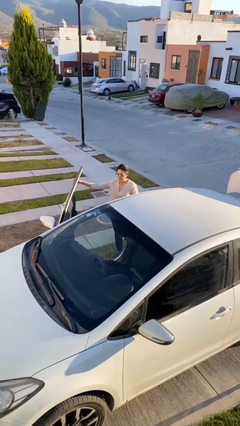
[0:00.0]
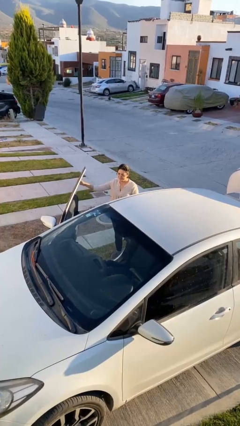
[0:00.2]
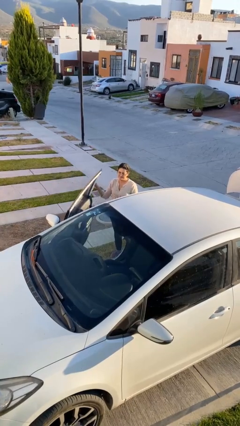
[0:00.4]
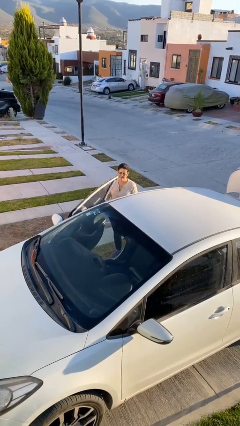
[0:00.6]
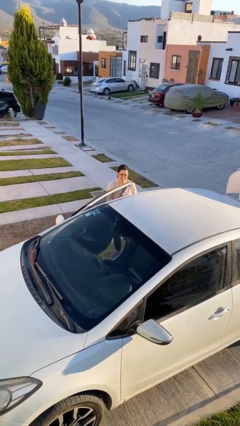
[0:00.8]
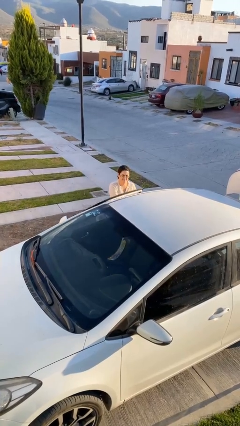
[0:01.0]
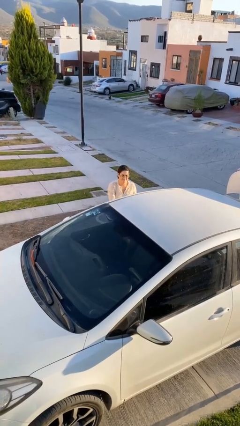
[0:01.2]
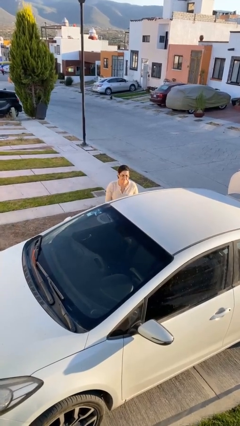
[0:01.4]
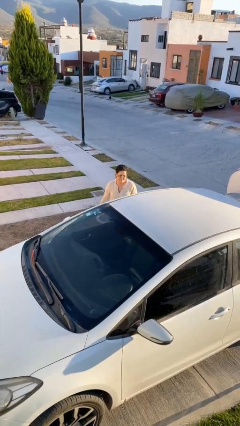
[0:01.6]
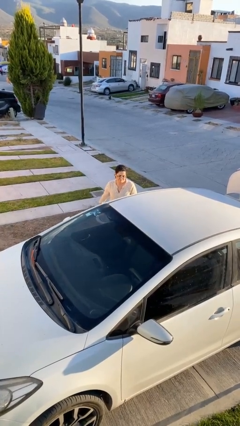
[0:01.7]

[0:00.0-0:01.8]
person closes car door

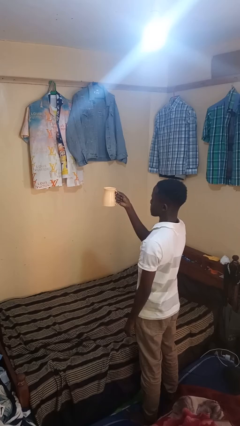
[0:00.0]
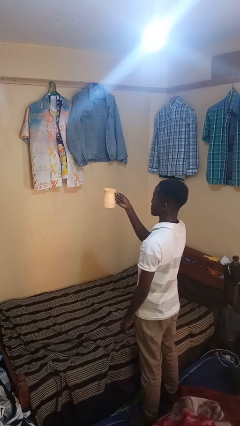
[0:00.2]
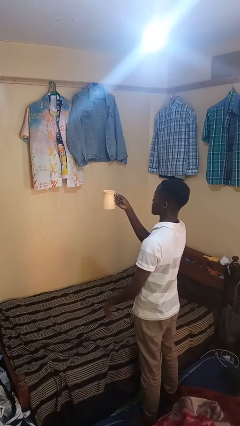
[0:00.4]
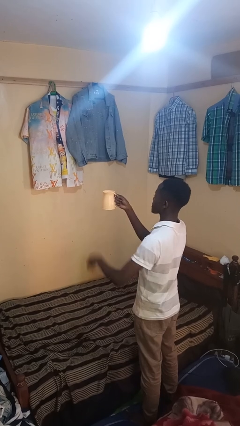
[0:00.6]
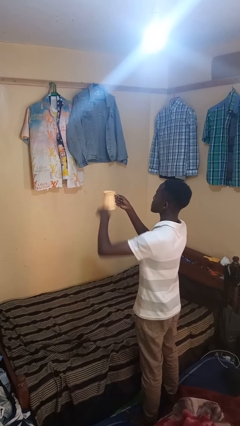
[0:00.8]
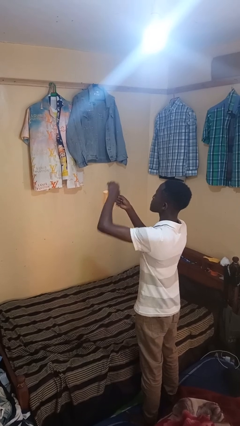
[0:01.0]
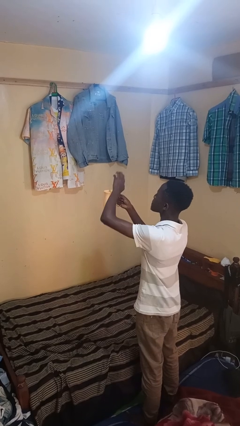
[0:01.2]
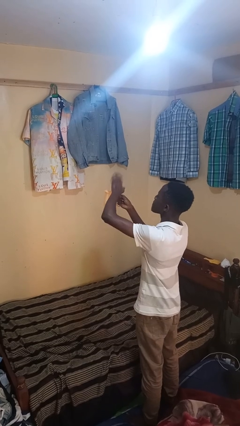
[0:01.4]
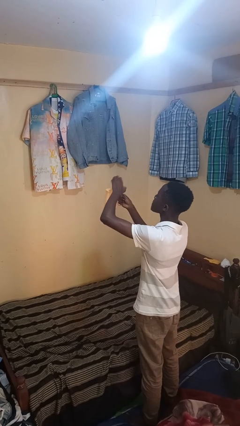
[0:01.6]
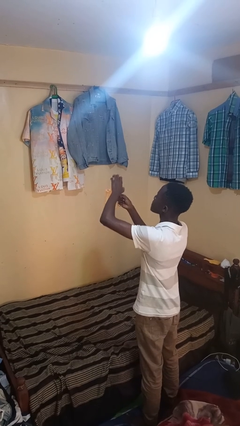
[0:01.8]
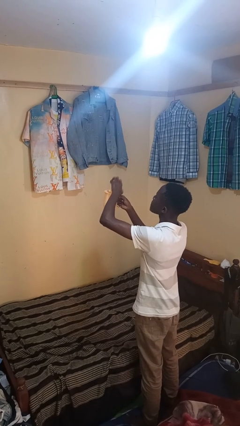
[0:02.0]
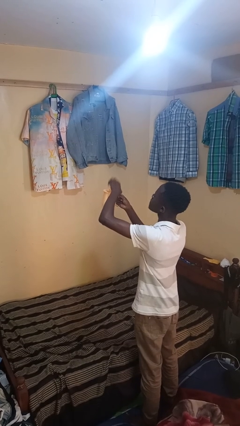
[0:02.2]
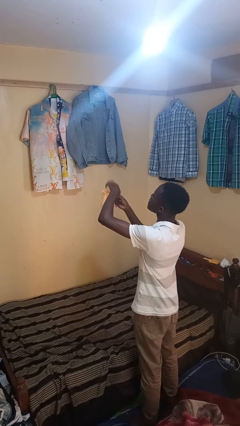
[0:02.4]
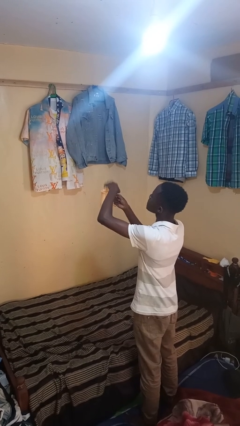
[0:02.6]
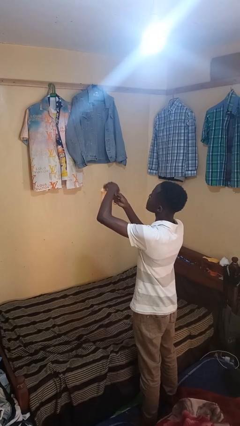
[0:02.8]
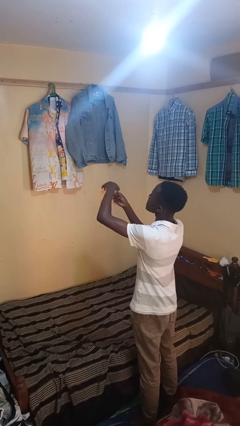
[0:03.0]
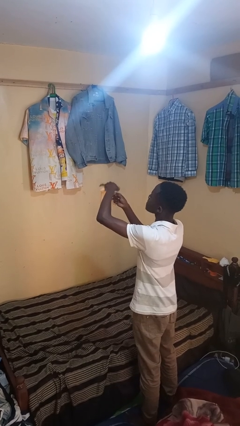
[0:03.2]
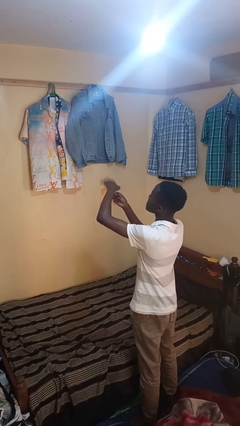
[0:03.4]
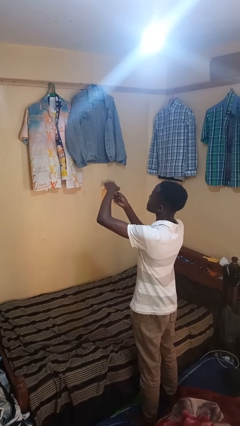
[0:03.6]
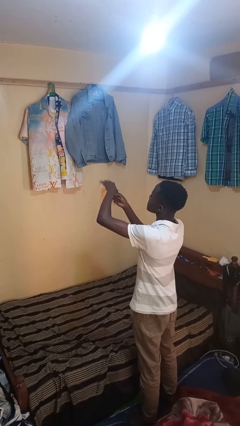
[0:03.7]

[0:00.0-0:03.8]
person taps object with finger

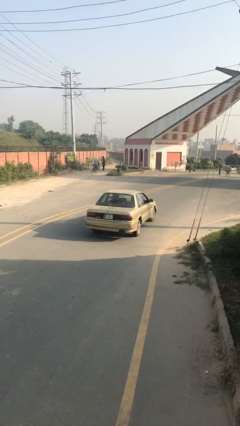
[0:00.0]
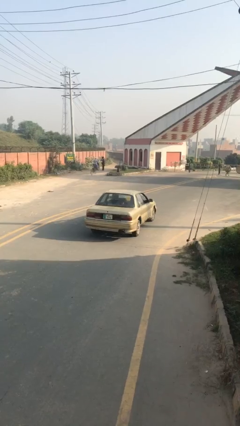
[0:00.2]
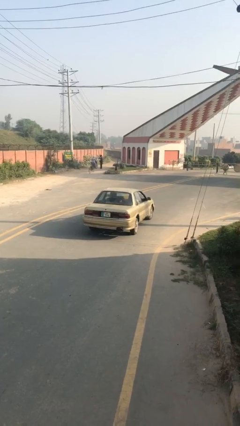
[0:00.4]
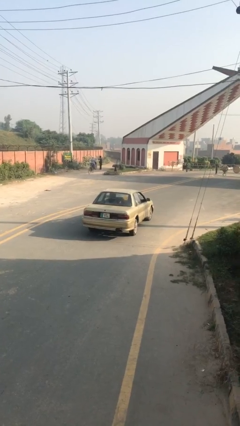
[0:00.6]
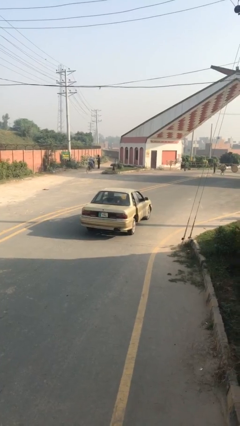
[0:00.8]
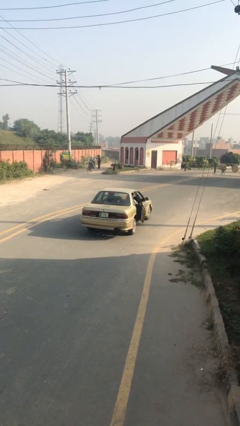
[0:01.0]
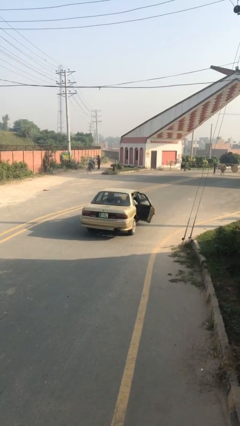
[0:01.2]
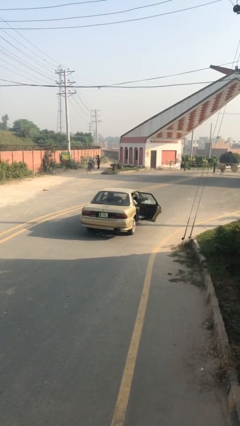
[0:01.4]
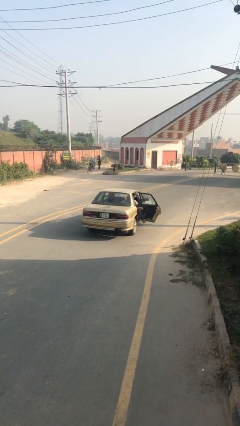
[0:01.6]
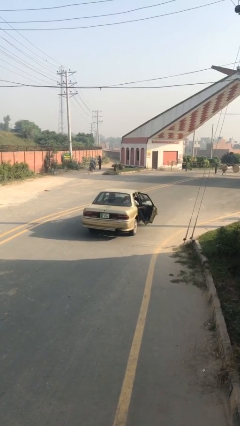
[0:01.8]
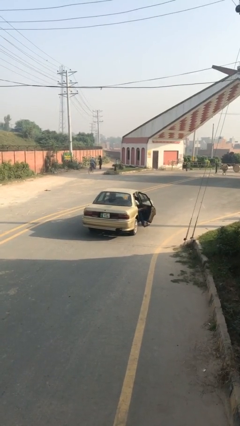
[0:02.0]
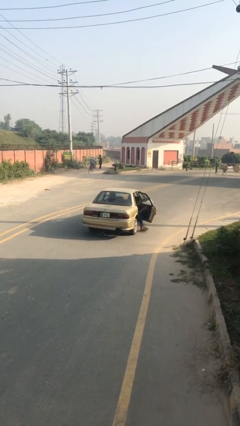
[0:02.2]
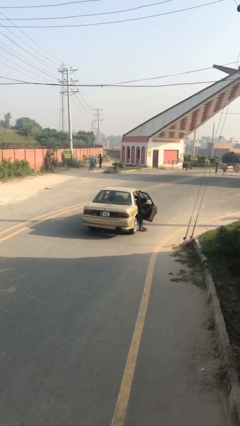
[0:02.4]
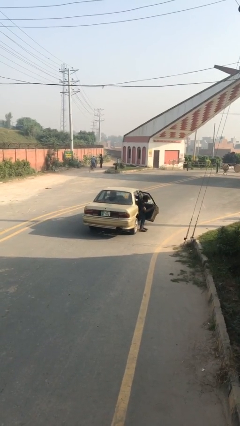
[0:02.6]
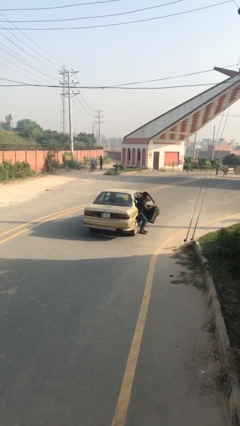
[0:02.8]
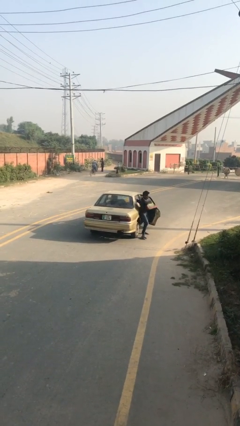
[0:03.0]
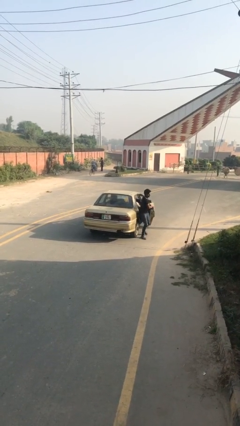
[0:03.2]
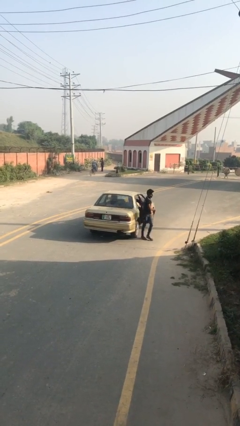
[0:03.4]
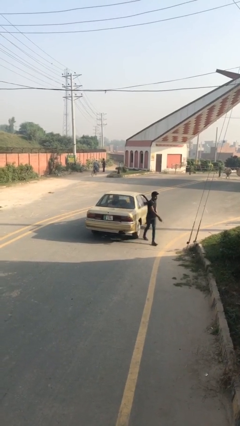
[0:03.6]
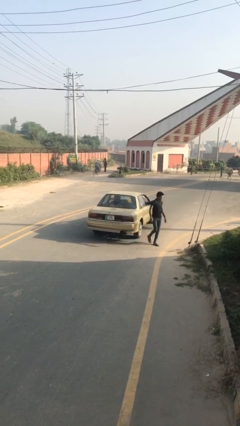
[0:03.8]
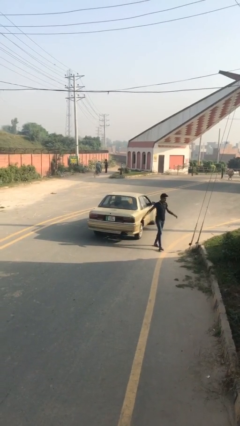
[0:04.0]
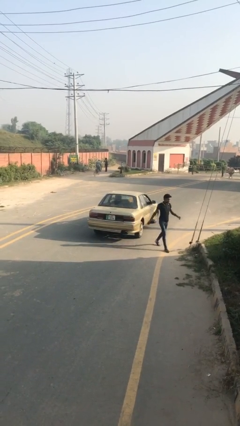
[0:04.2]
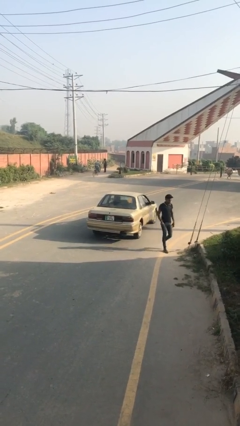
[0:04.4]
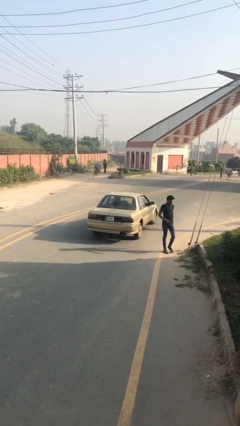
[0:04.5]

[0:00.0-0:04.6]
car drops off person

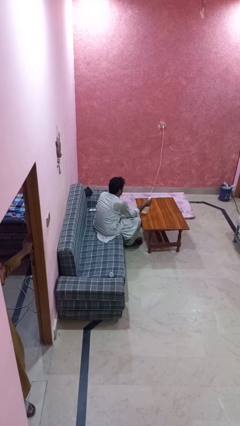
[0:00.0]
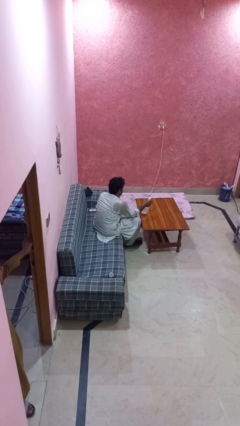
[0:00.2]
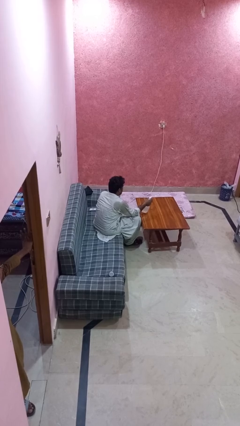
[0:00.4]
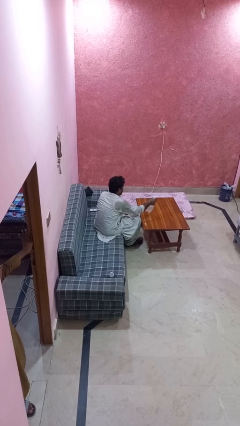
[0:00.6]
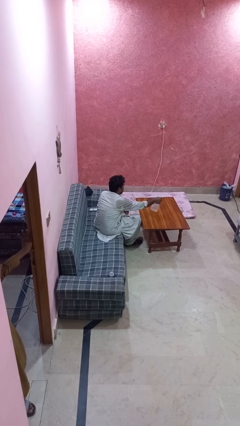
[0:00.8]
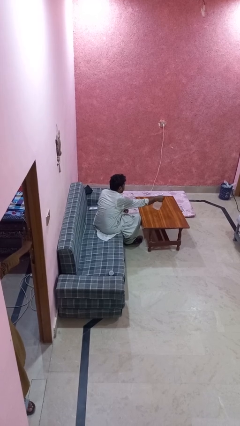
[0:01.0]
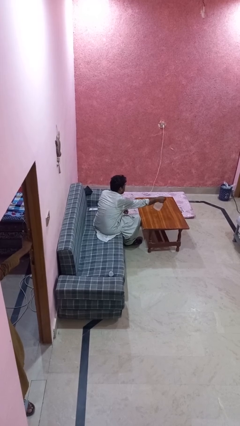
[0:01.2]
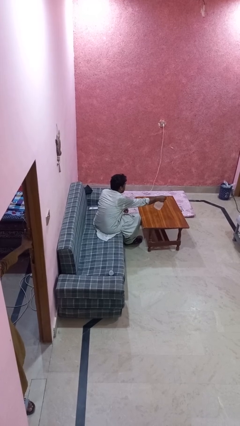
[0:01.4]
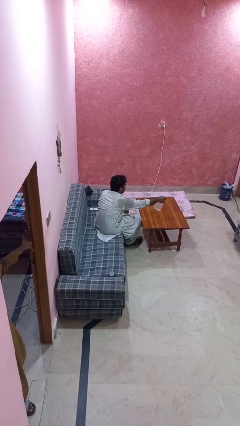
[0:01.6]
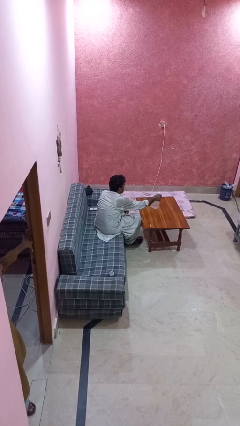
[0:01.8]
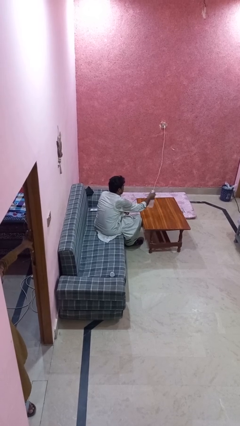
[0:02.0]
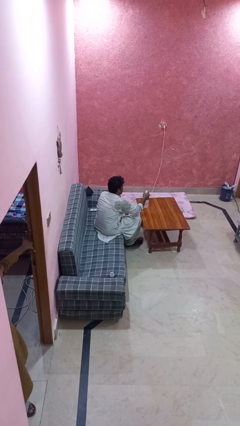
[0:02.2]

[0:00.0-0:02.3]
person sprays from bottle

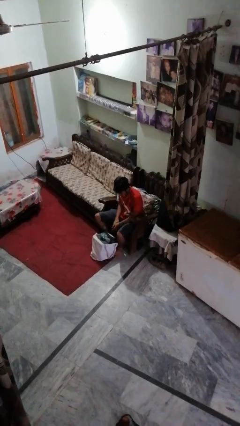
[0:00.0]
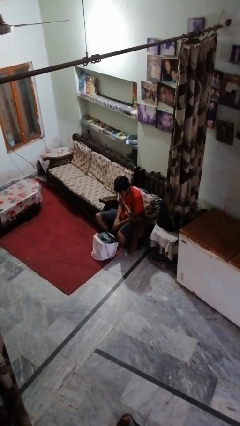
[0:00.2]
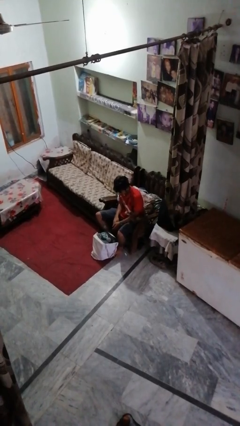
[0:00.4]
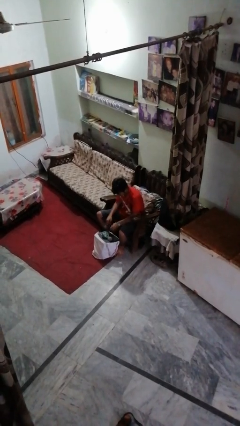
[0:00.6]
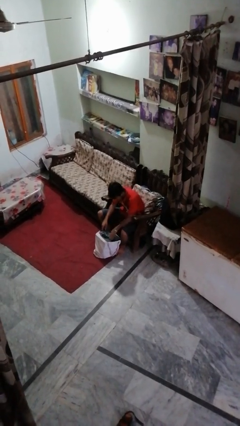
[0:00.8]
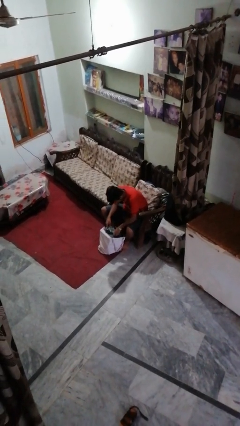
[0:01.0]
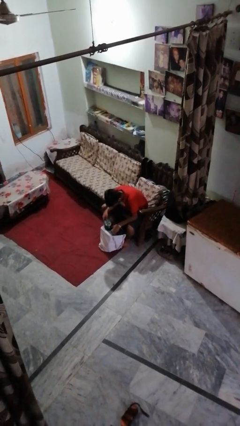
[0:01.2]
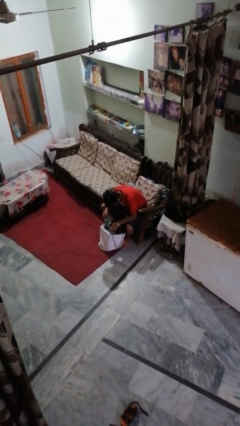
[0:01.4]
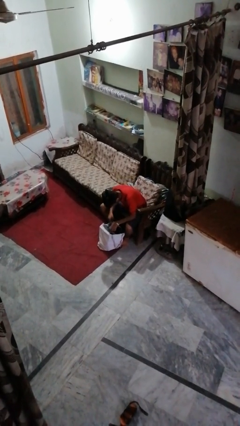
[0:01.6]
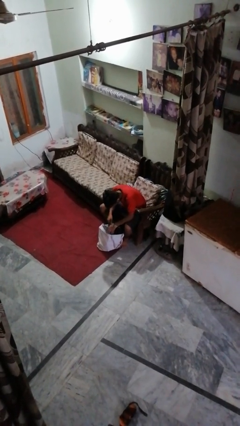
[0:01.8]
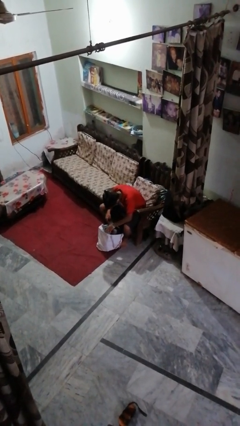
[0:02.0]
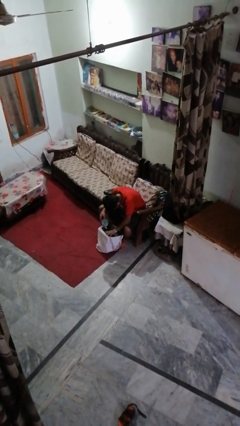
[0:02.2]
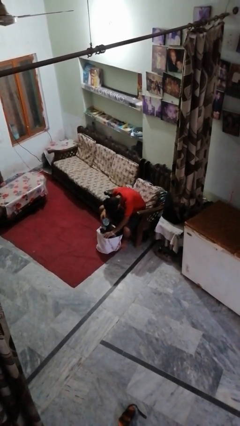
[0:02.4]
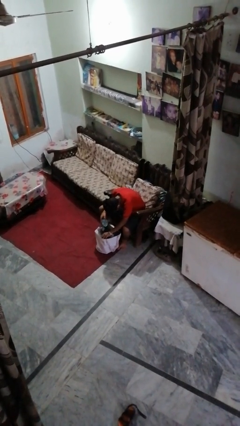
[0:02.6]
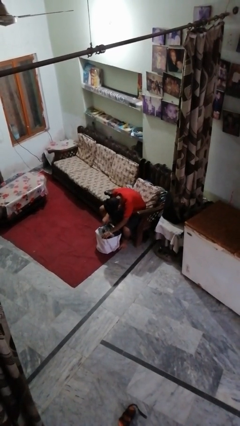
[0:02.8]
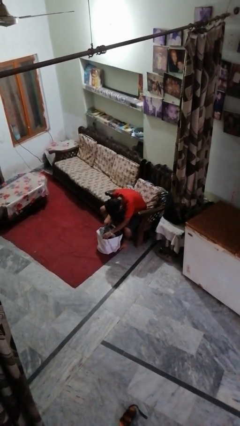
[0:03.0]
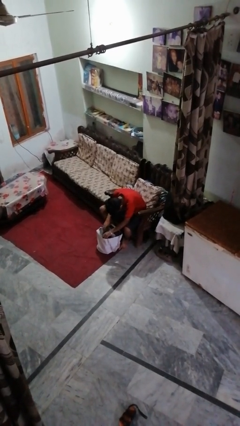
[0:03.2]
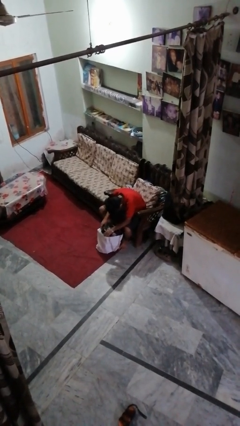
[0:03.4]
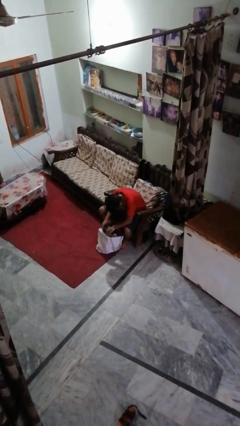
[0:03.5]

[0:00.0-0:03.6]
person searches under bed

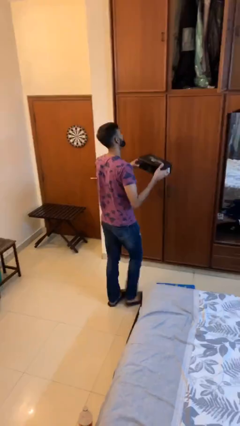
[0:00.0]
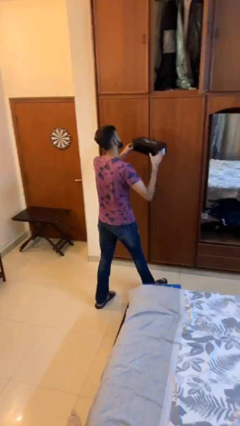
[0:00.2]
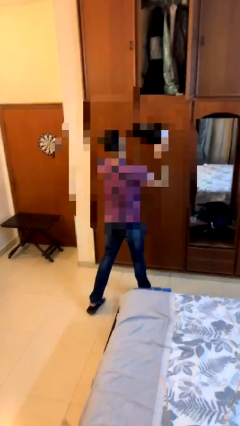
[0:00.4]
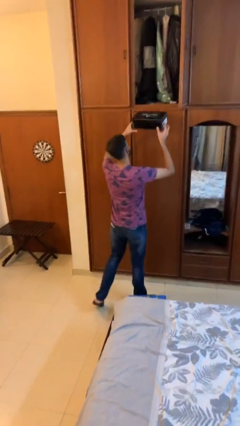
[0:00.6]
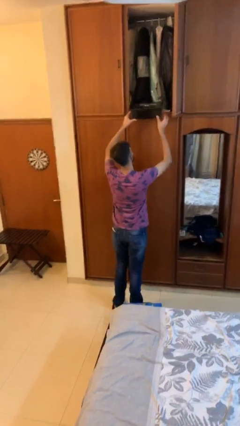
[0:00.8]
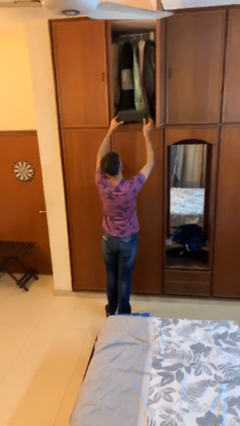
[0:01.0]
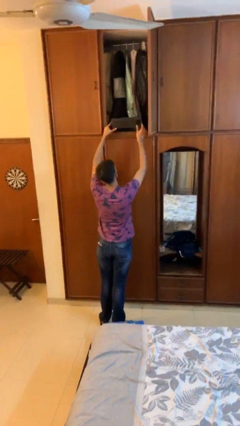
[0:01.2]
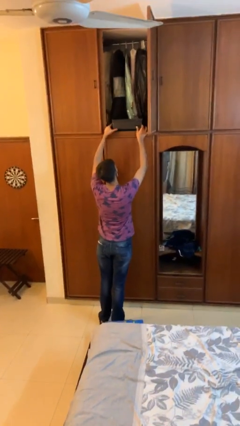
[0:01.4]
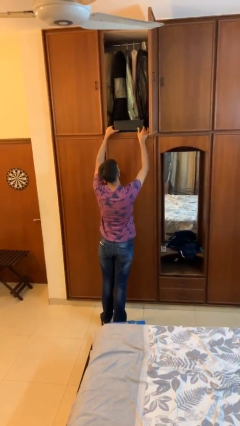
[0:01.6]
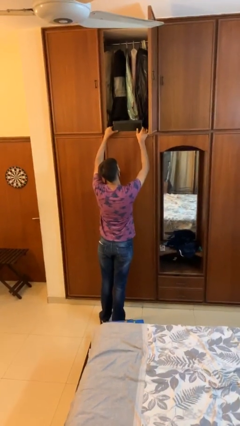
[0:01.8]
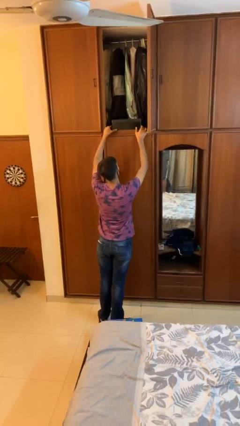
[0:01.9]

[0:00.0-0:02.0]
person puts down object on shelf
